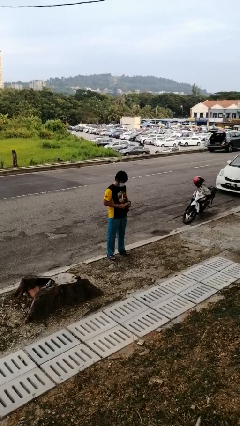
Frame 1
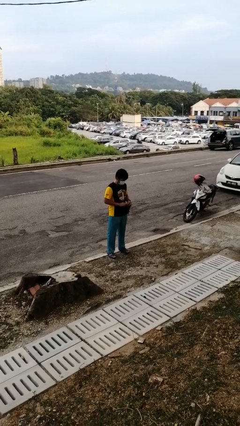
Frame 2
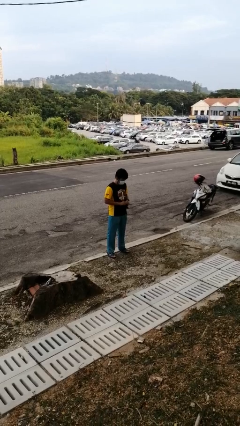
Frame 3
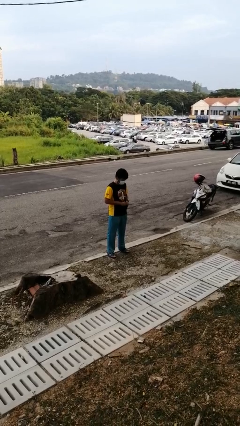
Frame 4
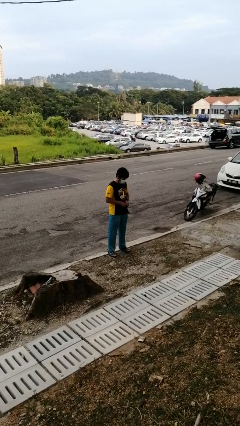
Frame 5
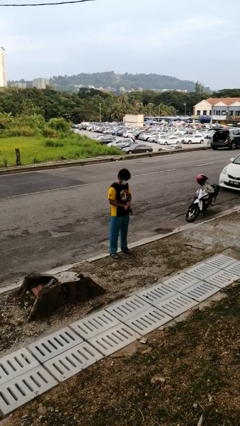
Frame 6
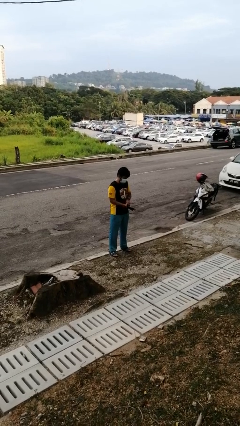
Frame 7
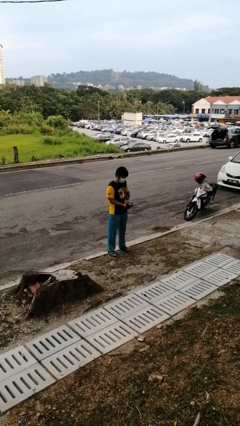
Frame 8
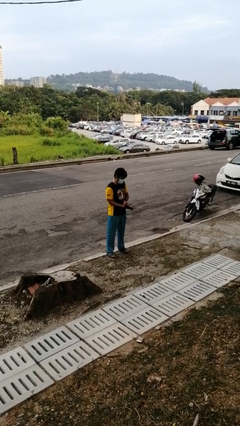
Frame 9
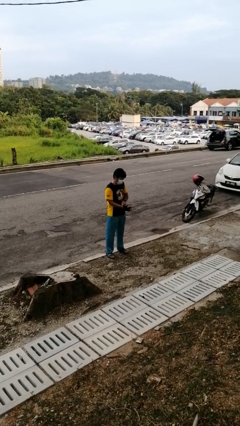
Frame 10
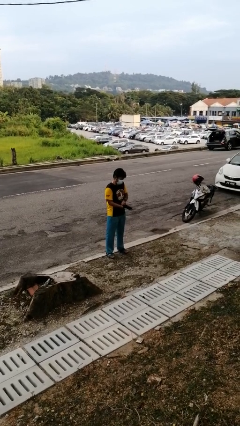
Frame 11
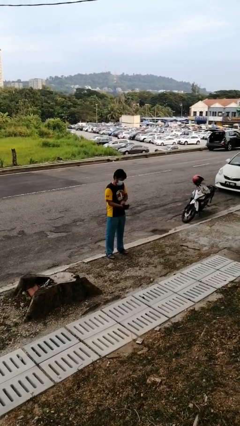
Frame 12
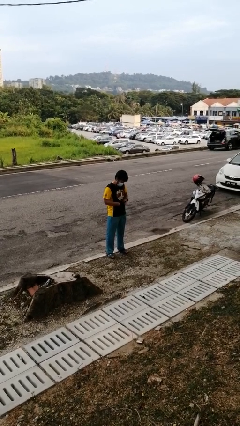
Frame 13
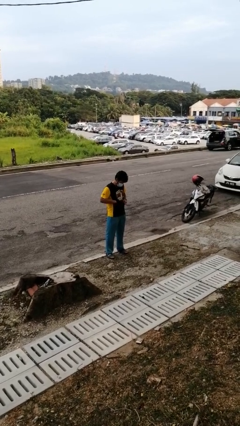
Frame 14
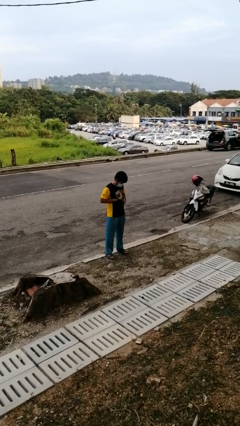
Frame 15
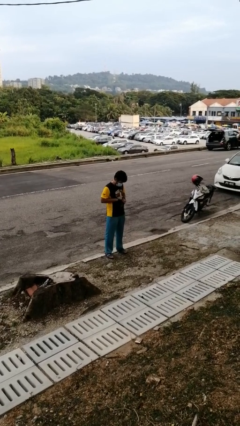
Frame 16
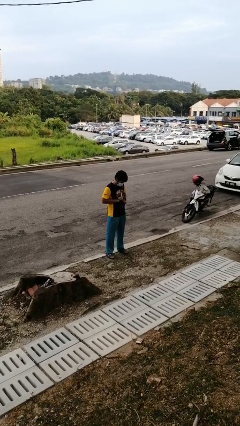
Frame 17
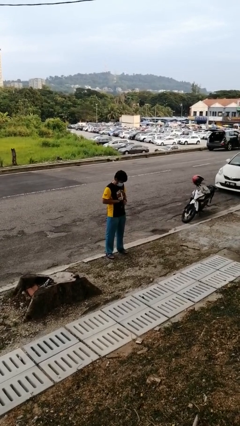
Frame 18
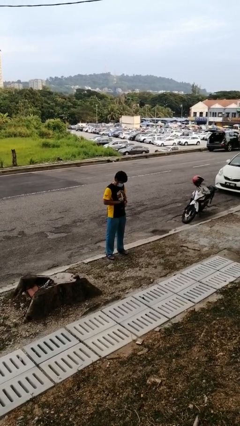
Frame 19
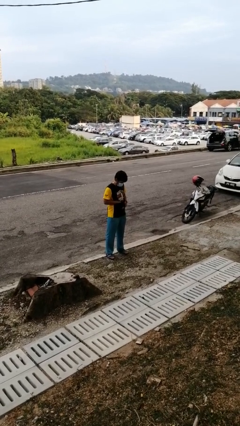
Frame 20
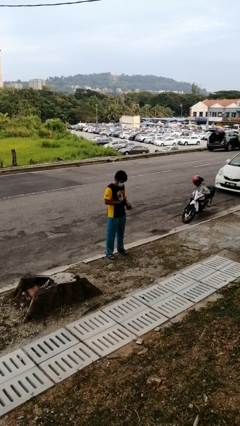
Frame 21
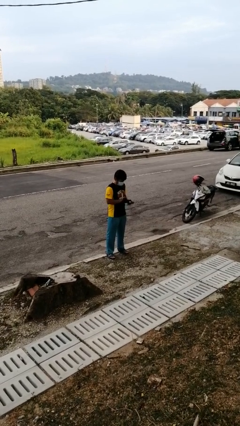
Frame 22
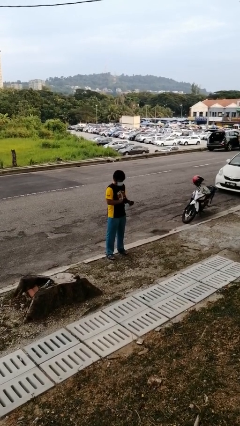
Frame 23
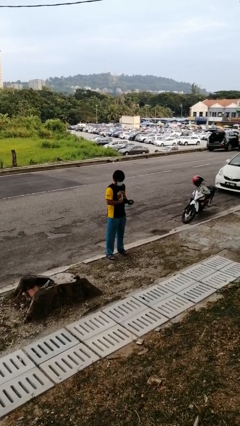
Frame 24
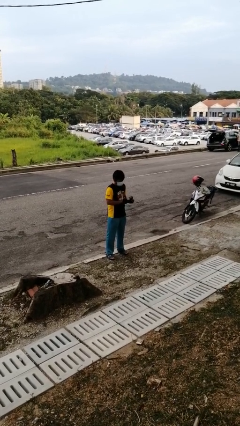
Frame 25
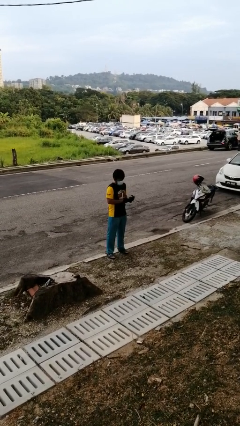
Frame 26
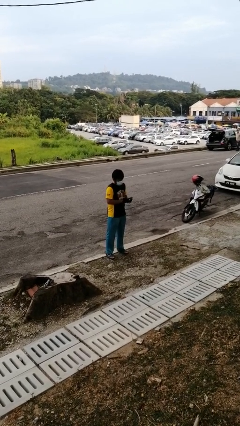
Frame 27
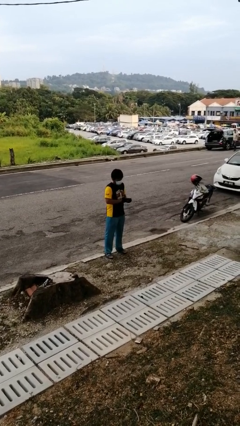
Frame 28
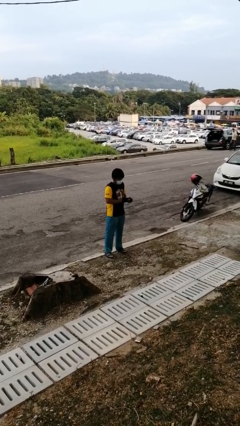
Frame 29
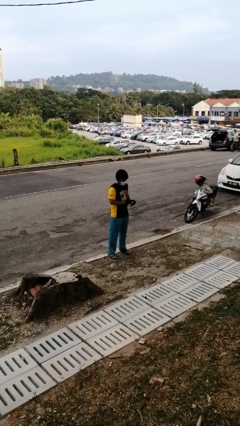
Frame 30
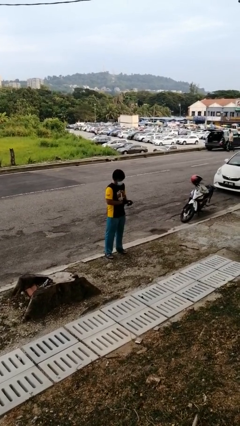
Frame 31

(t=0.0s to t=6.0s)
person puts on gloves

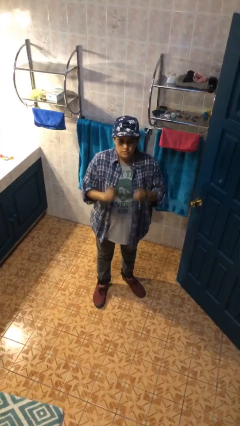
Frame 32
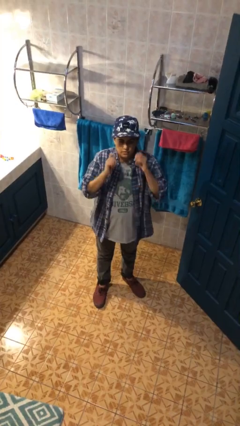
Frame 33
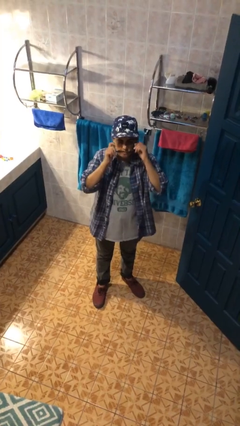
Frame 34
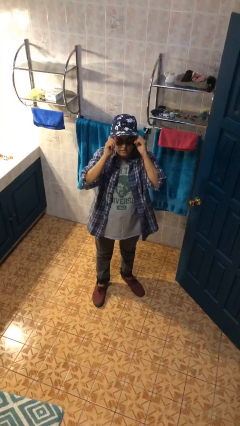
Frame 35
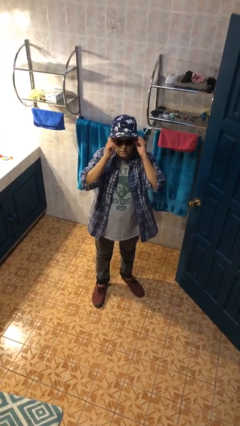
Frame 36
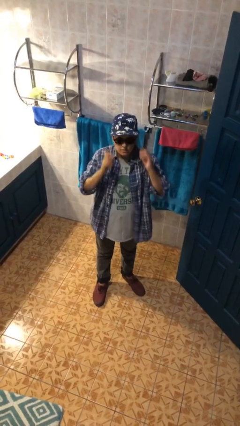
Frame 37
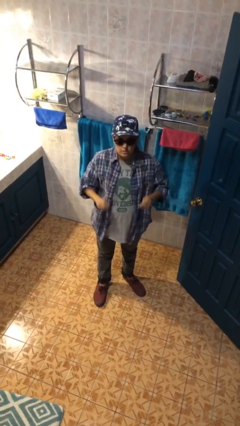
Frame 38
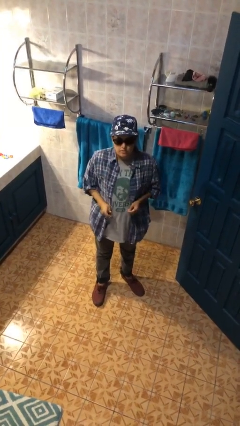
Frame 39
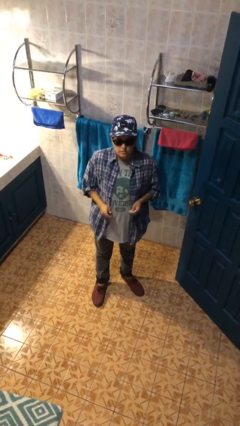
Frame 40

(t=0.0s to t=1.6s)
person puts on sunglasses

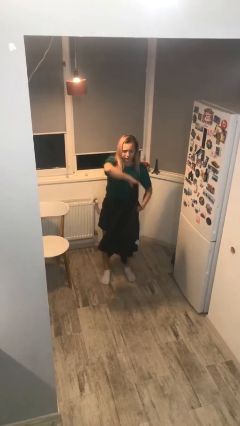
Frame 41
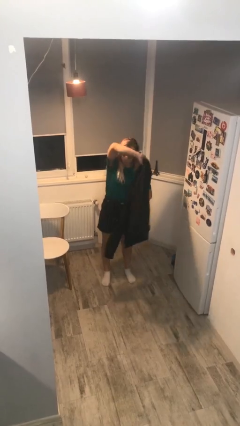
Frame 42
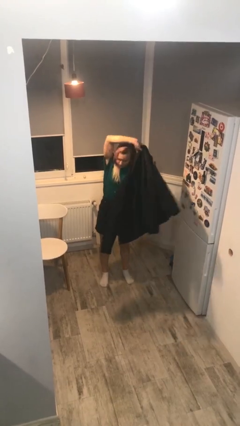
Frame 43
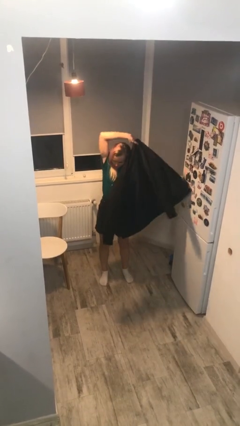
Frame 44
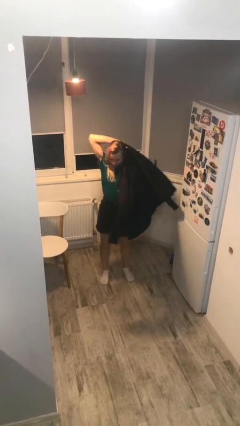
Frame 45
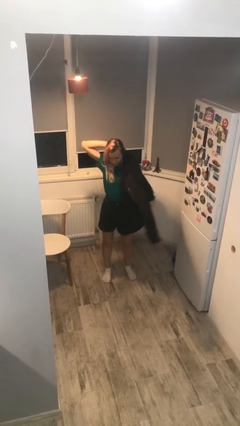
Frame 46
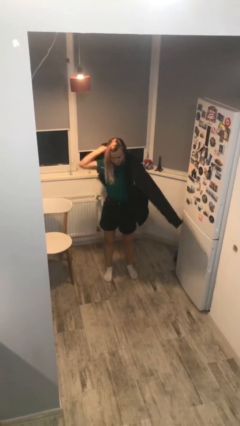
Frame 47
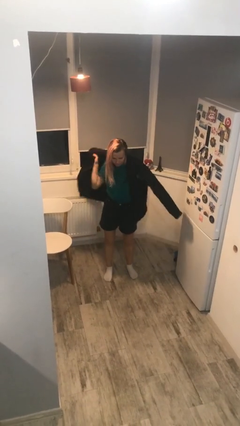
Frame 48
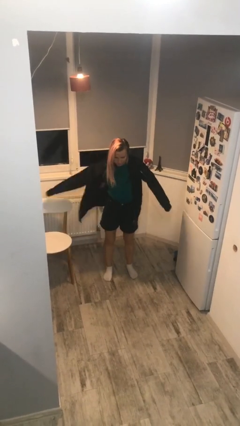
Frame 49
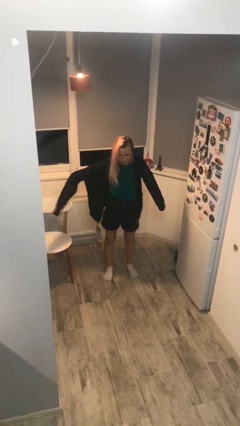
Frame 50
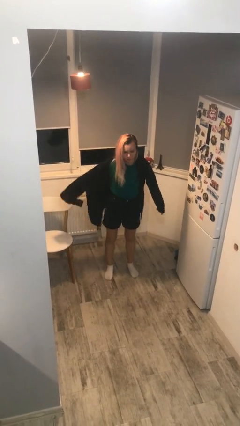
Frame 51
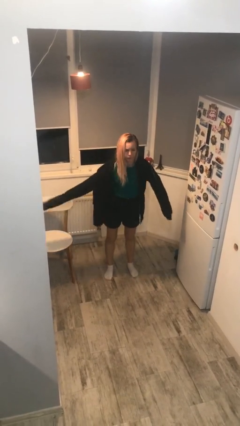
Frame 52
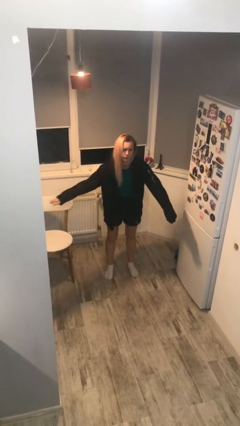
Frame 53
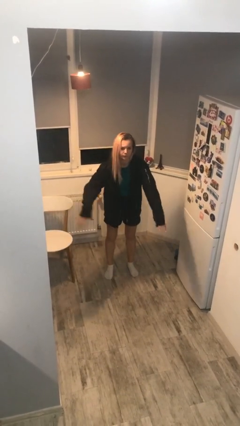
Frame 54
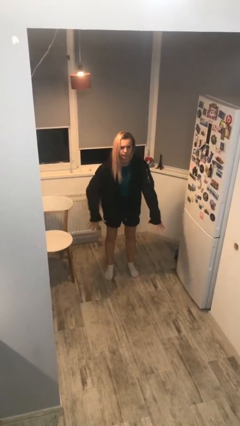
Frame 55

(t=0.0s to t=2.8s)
person puts on jacket

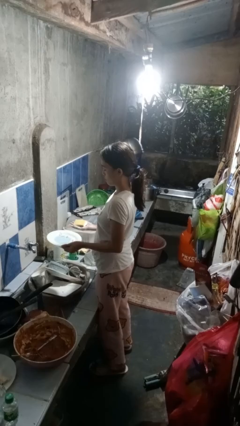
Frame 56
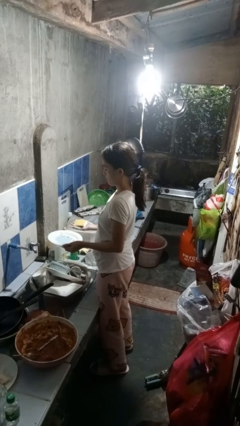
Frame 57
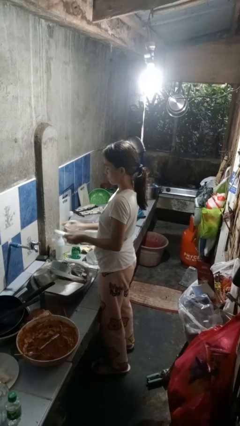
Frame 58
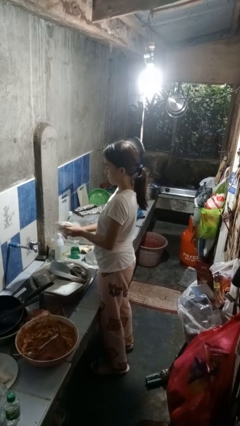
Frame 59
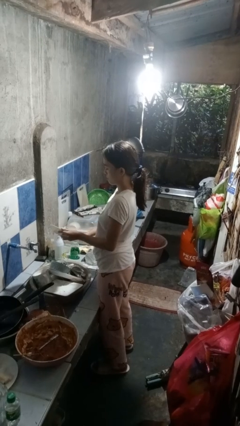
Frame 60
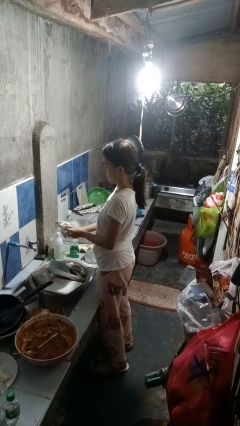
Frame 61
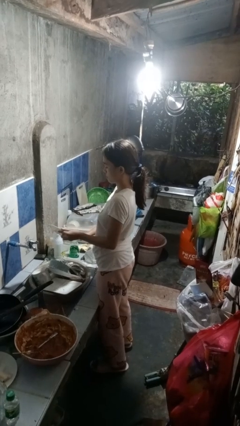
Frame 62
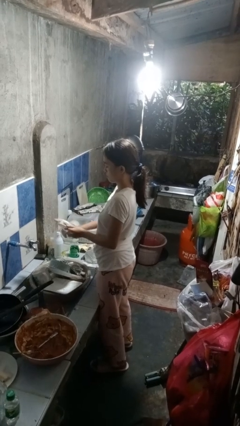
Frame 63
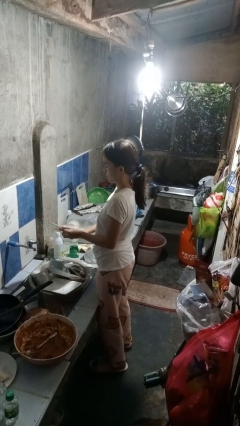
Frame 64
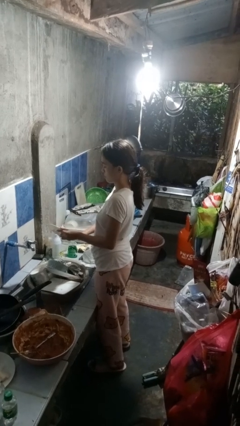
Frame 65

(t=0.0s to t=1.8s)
person washes dish

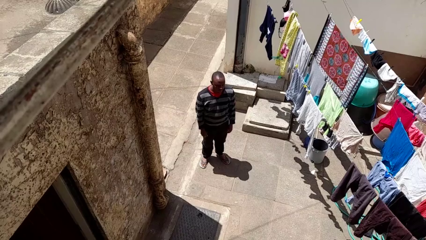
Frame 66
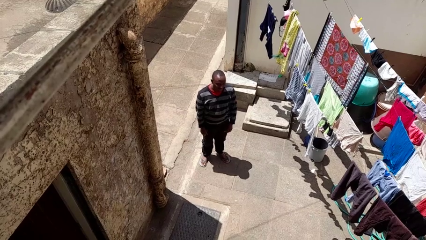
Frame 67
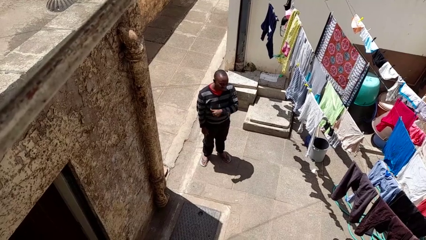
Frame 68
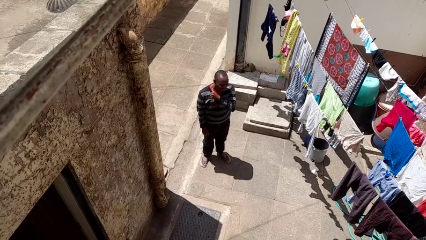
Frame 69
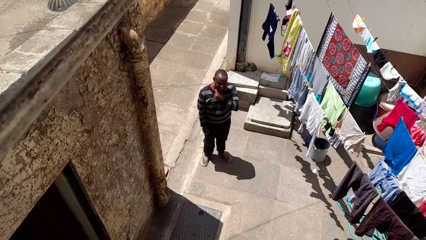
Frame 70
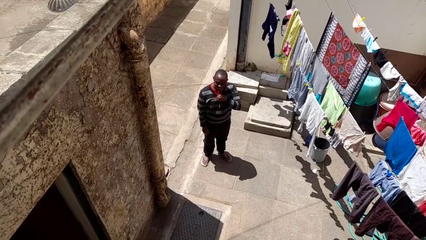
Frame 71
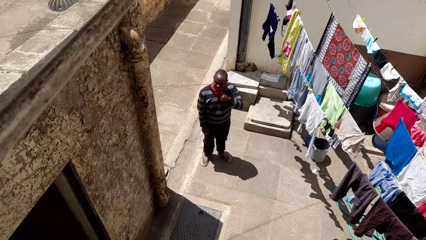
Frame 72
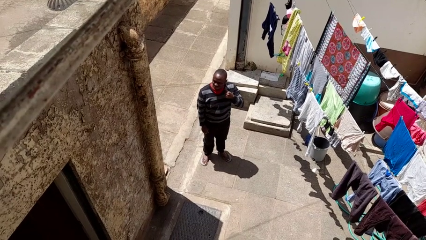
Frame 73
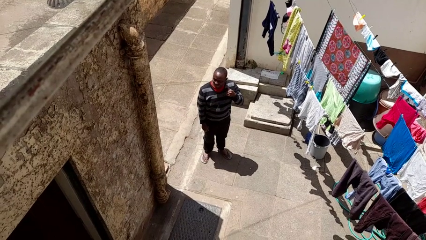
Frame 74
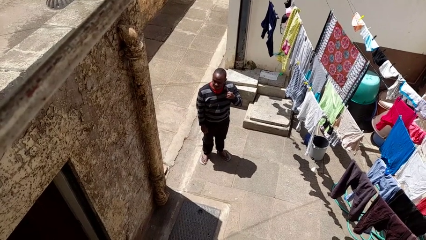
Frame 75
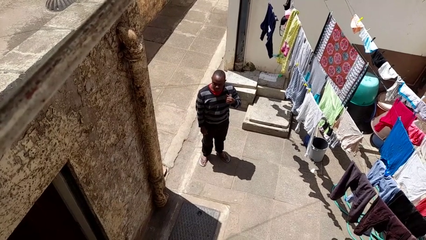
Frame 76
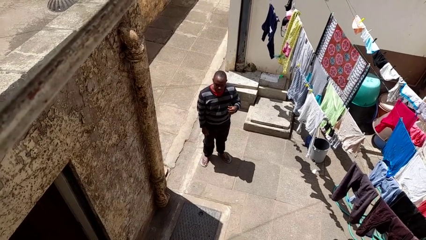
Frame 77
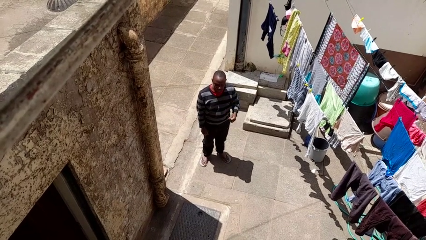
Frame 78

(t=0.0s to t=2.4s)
person gestures cut

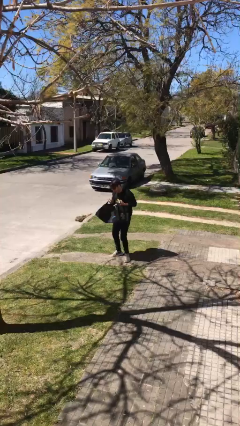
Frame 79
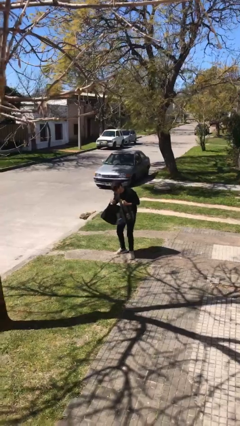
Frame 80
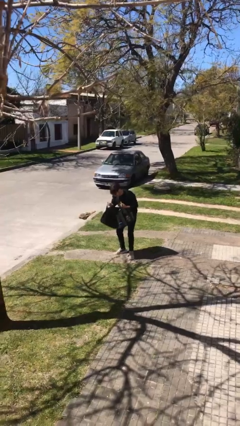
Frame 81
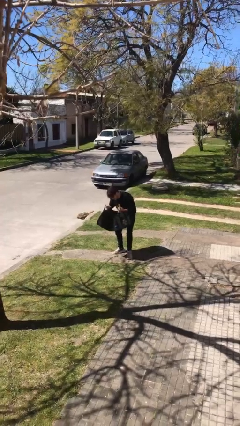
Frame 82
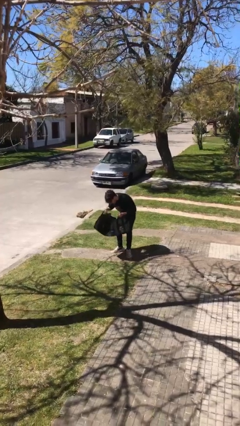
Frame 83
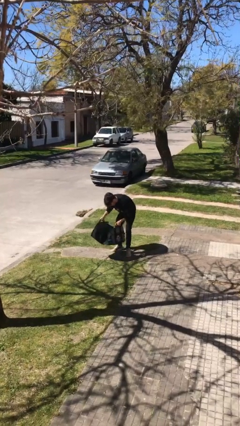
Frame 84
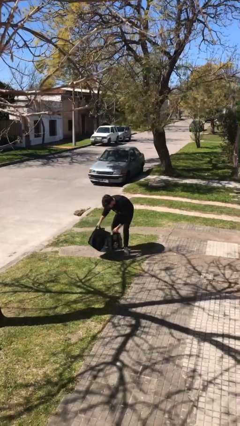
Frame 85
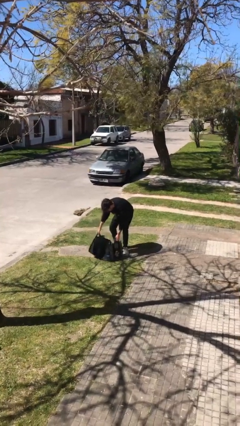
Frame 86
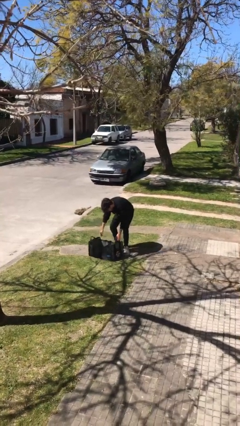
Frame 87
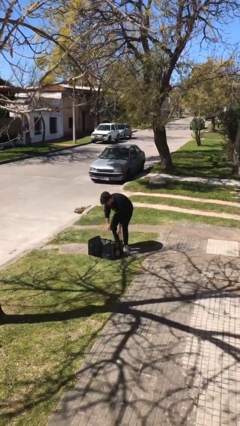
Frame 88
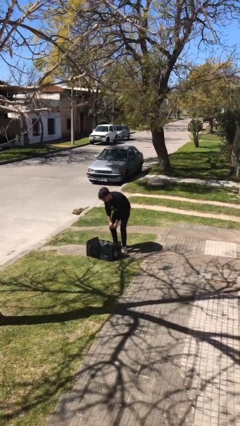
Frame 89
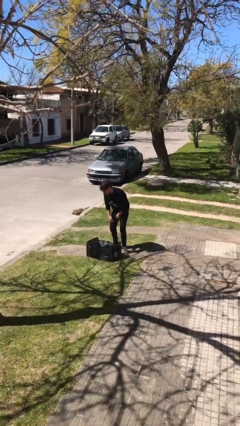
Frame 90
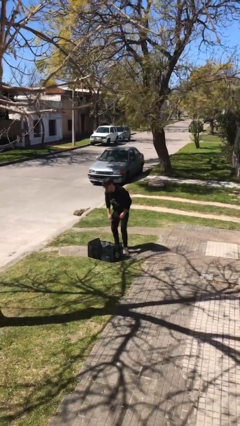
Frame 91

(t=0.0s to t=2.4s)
person puts down object on floor

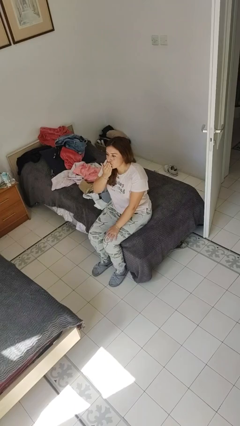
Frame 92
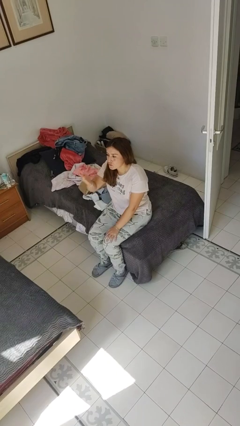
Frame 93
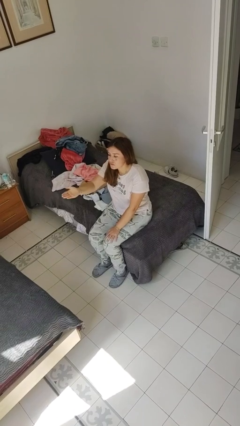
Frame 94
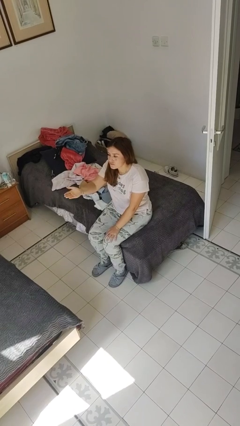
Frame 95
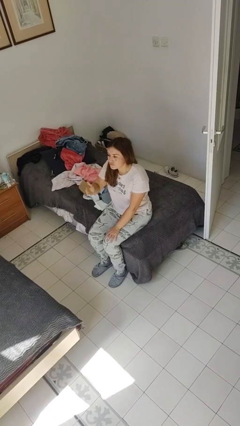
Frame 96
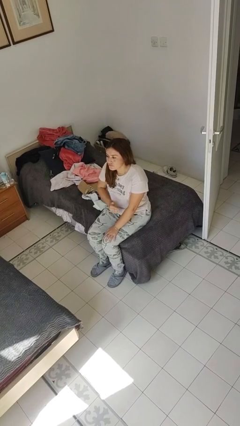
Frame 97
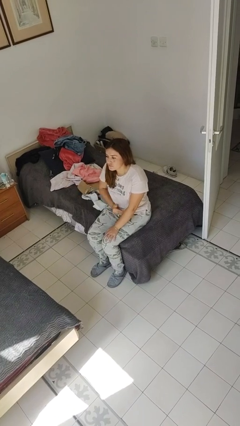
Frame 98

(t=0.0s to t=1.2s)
person gestures blow kiss
